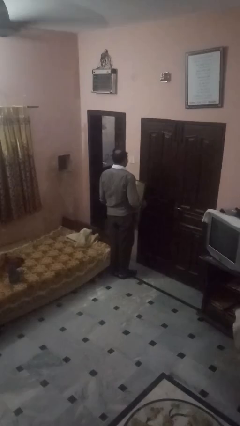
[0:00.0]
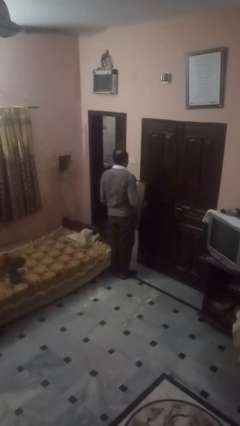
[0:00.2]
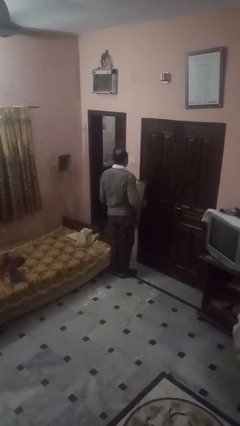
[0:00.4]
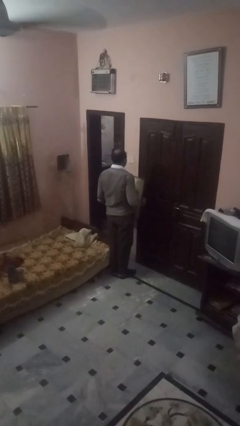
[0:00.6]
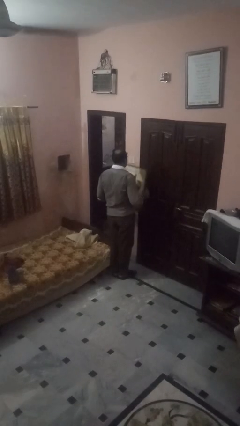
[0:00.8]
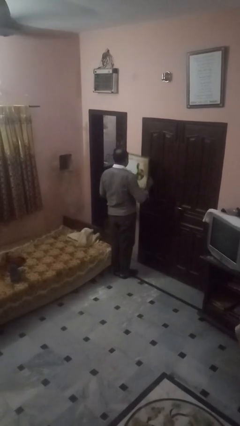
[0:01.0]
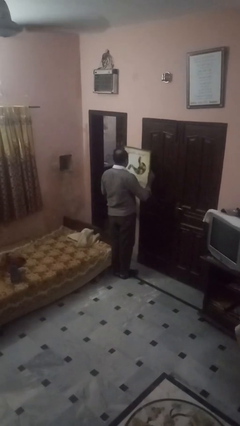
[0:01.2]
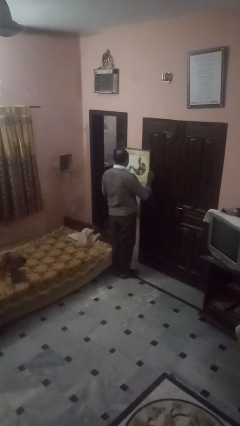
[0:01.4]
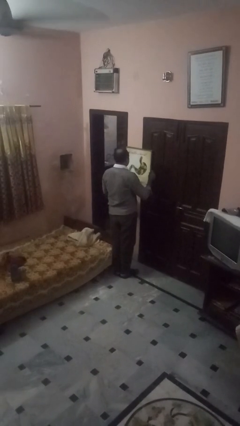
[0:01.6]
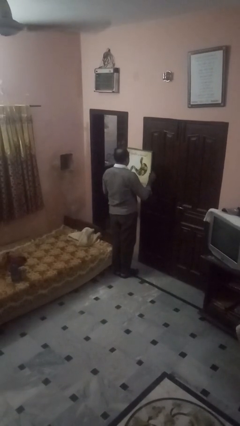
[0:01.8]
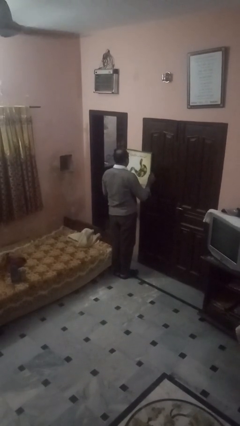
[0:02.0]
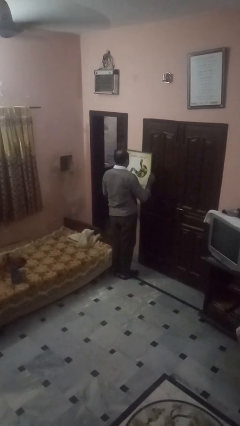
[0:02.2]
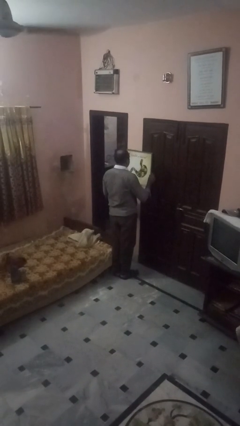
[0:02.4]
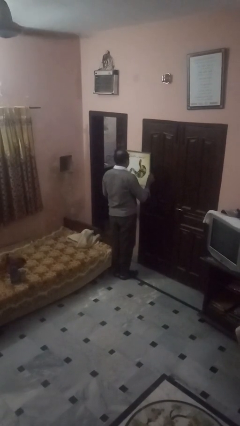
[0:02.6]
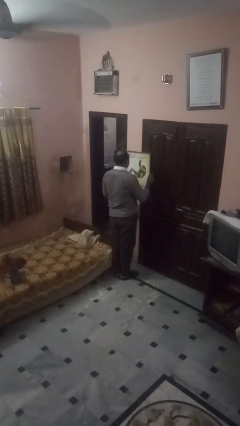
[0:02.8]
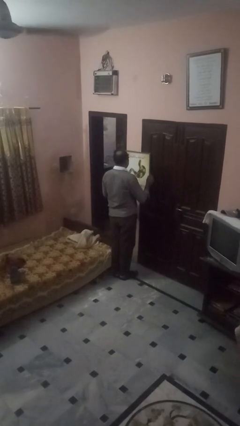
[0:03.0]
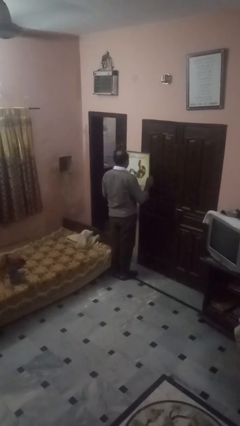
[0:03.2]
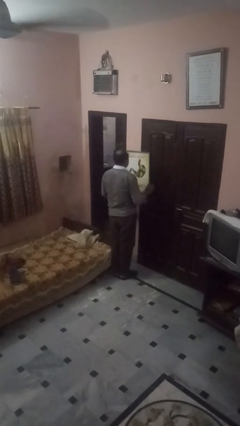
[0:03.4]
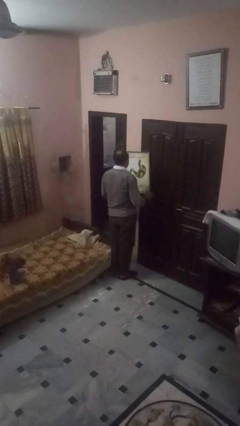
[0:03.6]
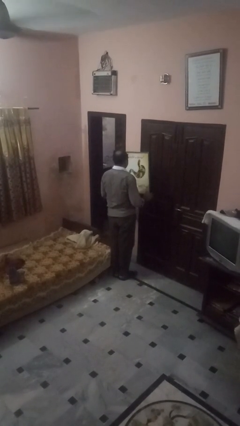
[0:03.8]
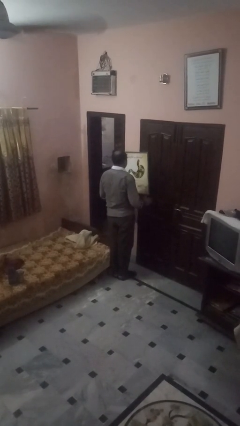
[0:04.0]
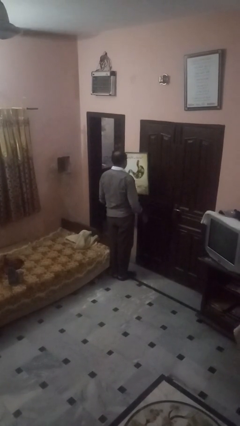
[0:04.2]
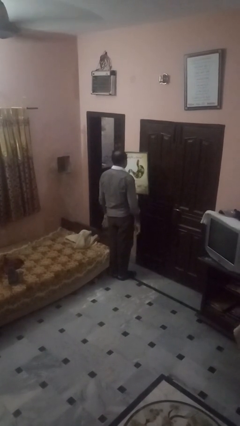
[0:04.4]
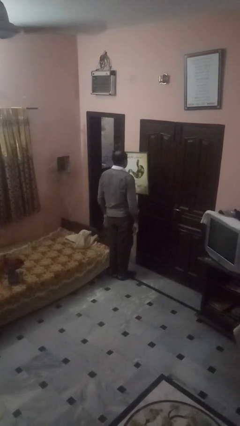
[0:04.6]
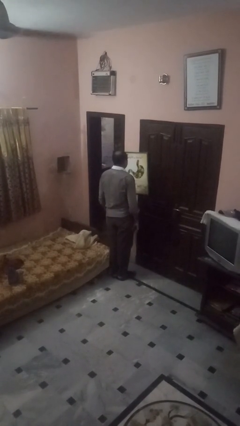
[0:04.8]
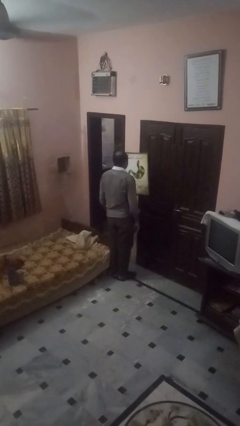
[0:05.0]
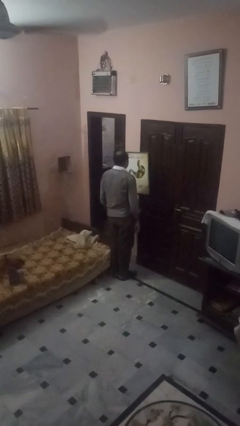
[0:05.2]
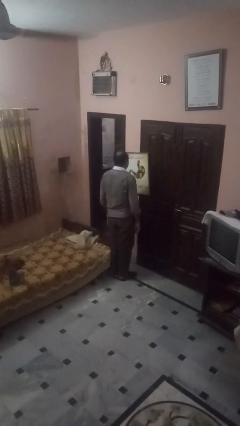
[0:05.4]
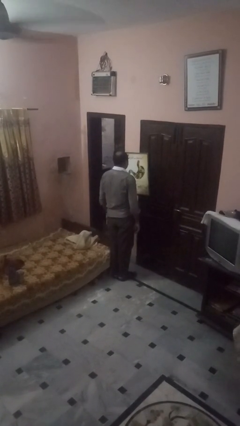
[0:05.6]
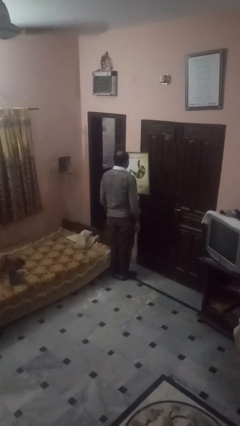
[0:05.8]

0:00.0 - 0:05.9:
person puts up picture frame

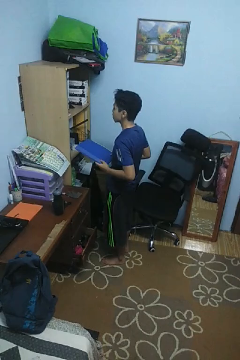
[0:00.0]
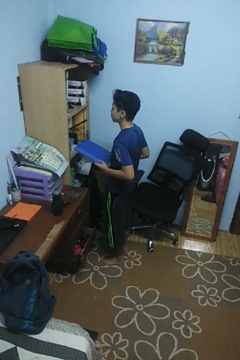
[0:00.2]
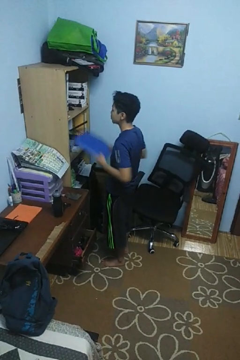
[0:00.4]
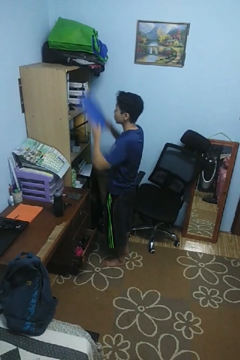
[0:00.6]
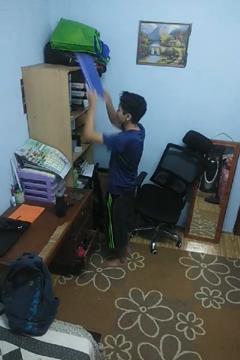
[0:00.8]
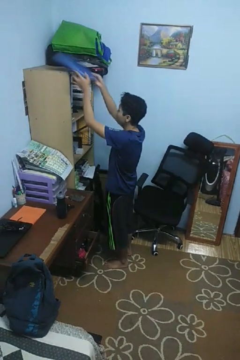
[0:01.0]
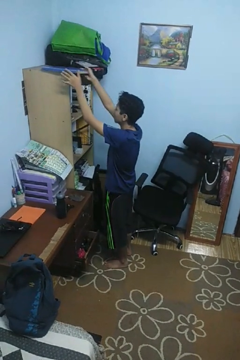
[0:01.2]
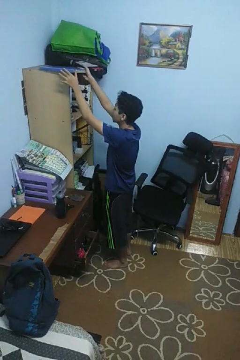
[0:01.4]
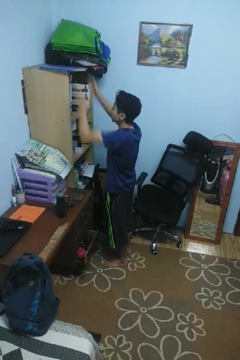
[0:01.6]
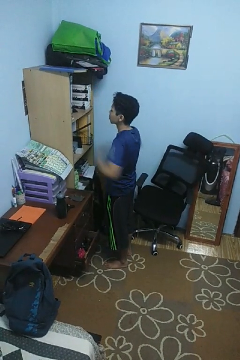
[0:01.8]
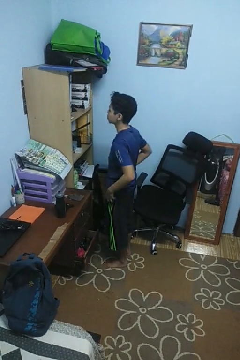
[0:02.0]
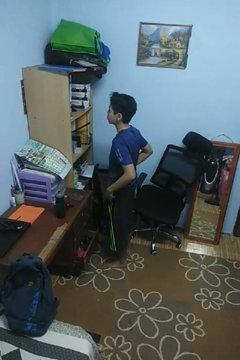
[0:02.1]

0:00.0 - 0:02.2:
person puts down object on shelf

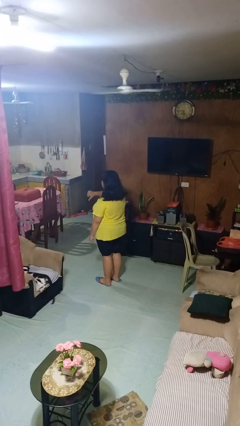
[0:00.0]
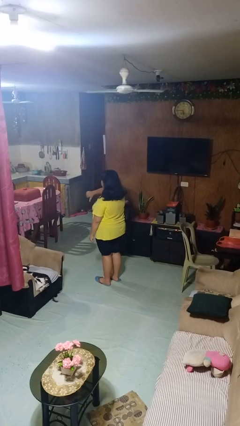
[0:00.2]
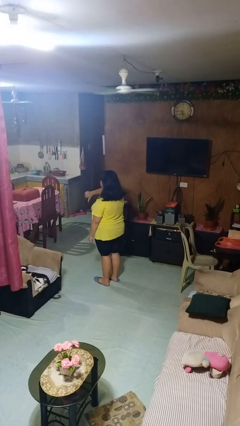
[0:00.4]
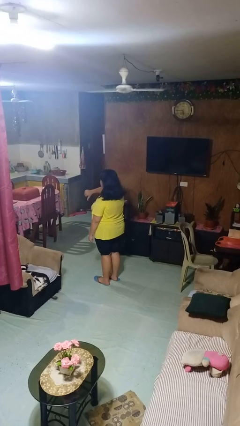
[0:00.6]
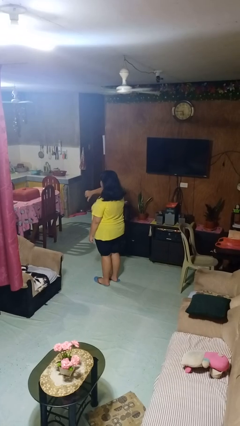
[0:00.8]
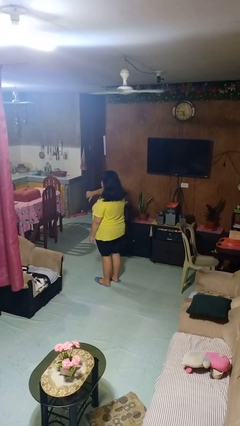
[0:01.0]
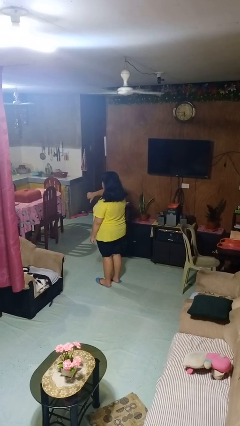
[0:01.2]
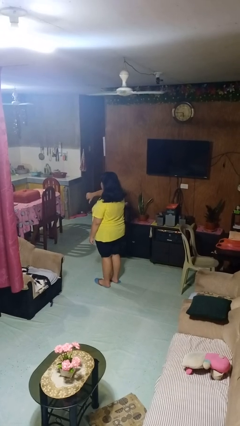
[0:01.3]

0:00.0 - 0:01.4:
person gestures thumbs down

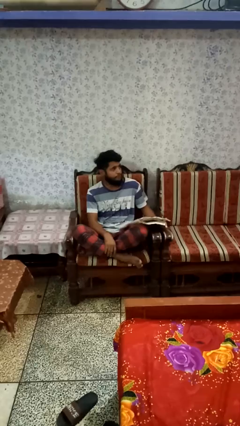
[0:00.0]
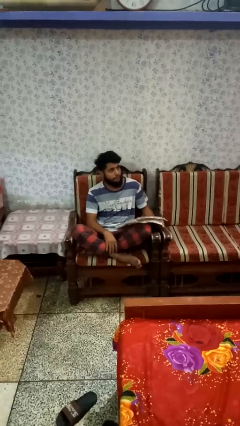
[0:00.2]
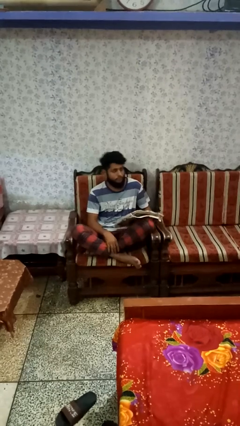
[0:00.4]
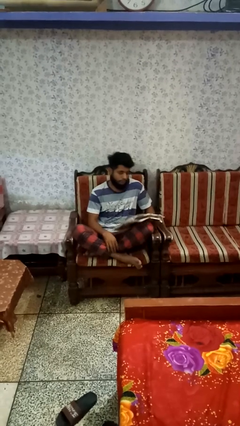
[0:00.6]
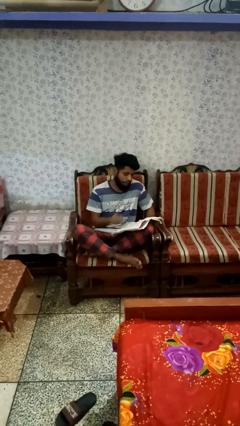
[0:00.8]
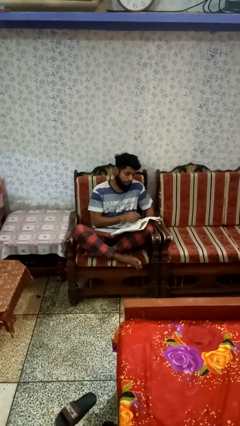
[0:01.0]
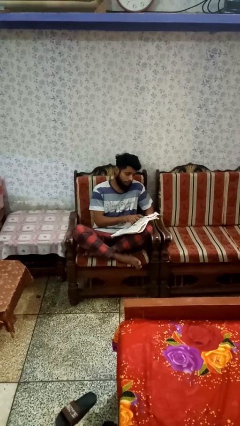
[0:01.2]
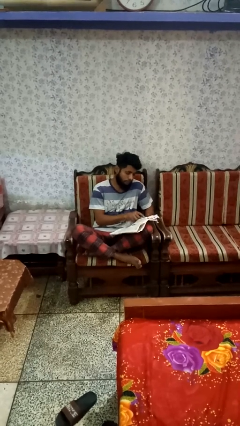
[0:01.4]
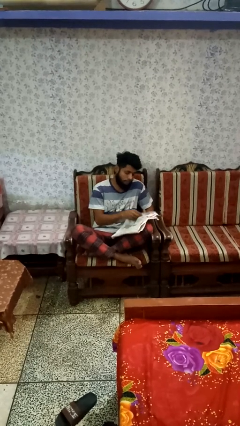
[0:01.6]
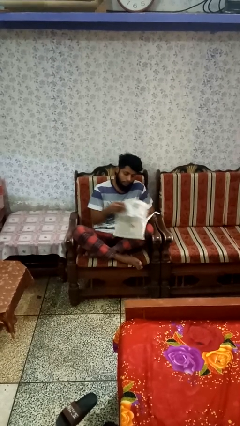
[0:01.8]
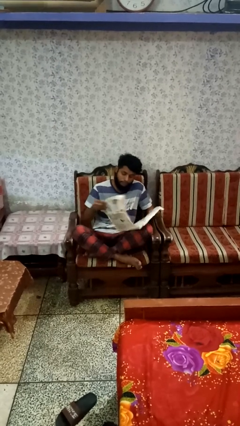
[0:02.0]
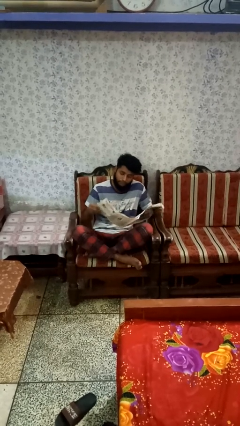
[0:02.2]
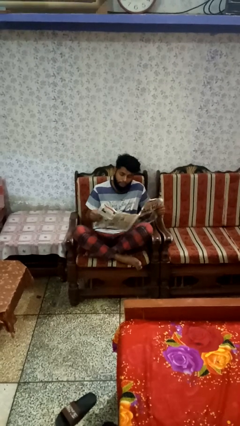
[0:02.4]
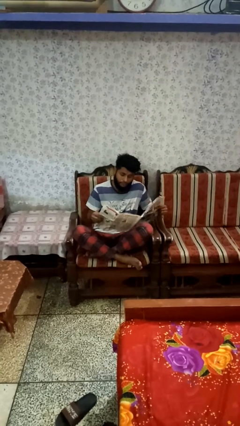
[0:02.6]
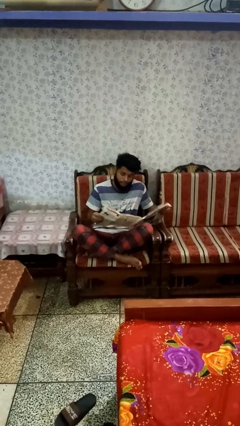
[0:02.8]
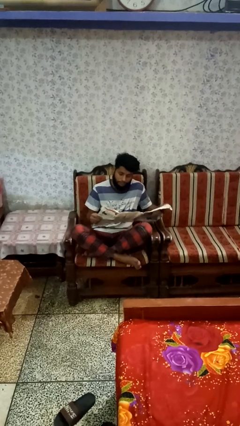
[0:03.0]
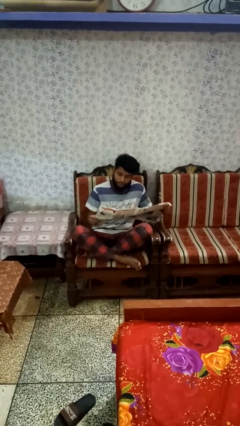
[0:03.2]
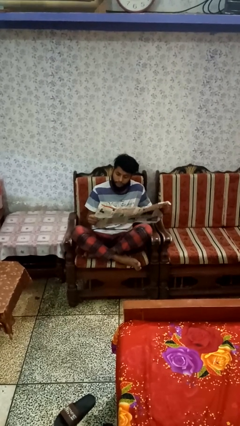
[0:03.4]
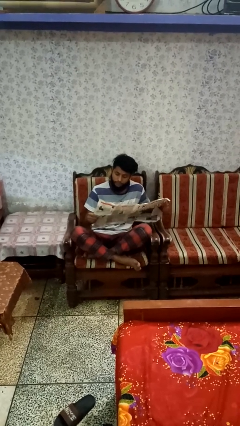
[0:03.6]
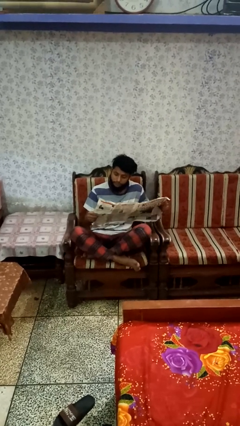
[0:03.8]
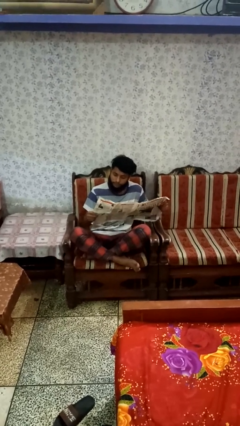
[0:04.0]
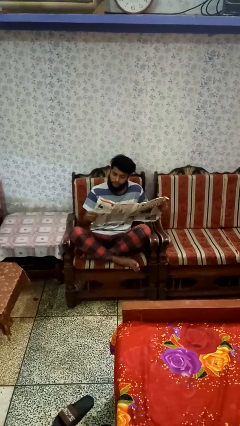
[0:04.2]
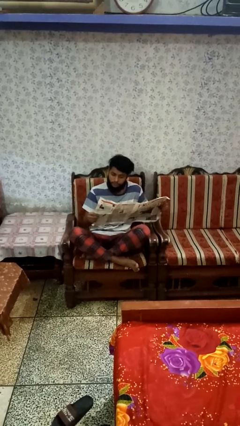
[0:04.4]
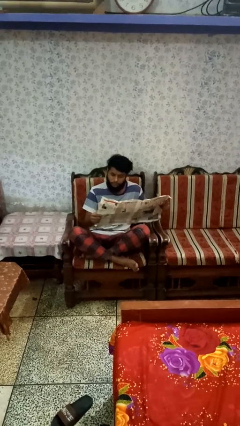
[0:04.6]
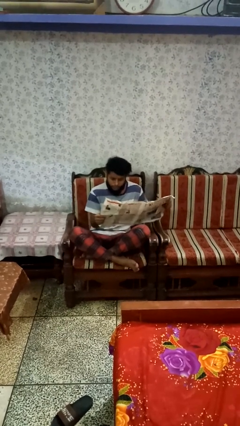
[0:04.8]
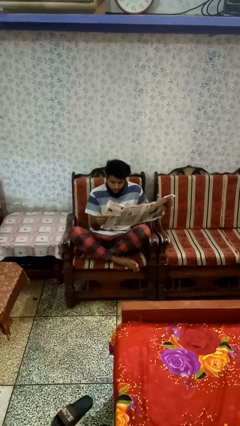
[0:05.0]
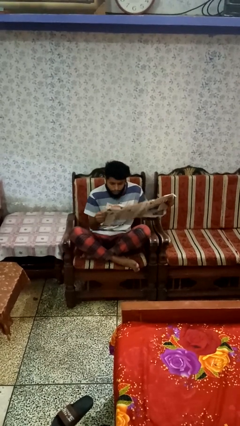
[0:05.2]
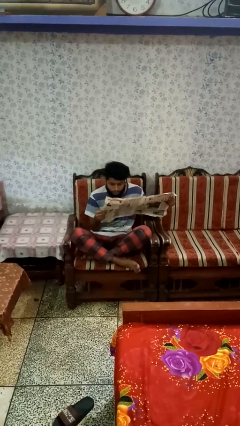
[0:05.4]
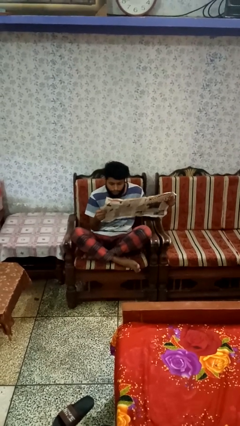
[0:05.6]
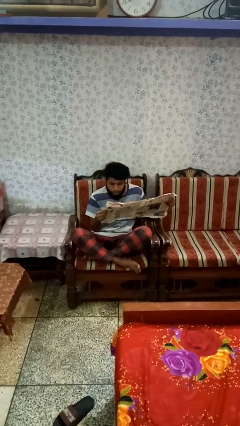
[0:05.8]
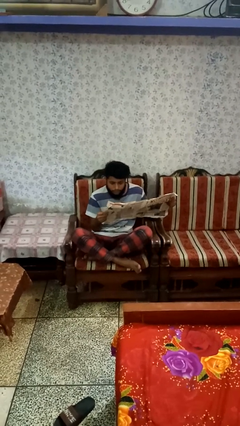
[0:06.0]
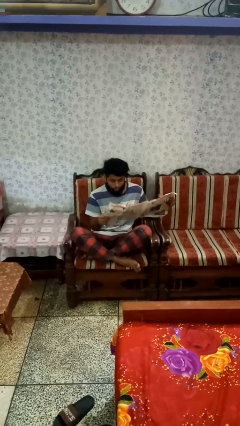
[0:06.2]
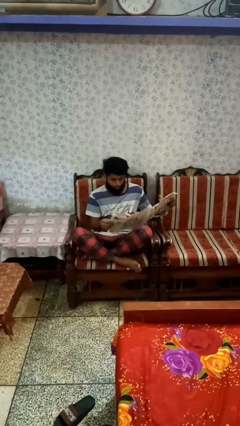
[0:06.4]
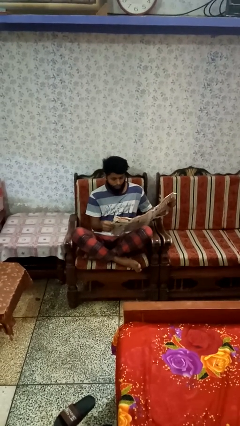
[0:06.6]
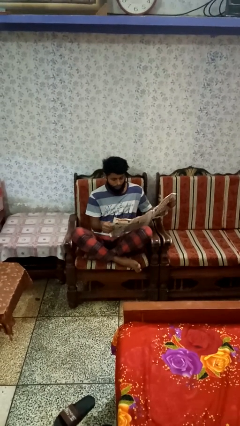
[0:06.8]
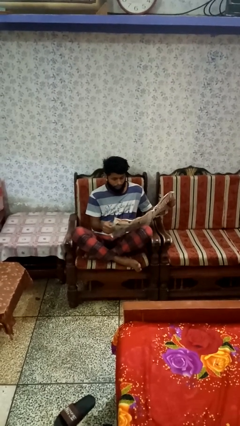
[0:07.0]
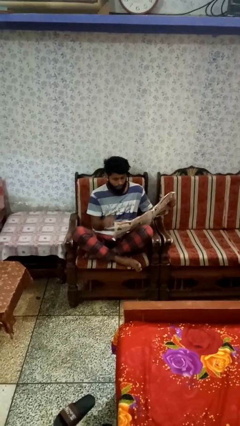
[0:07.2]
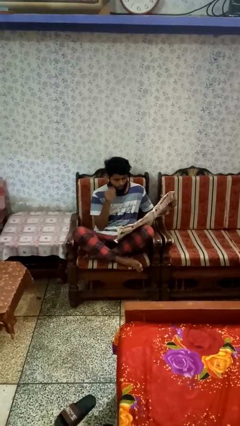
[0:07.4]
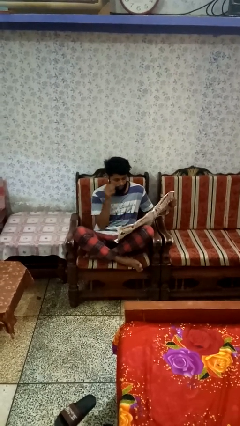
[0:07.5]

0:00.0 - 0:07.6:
person reads newspaper

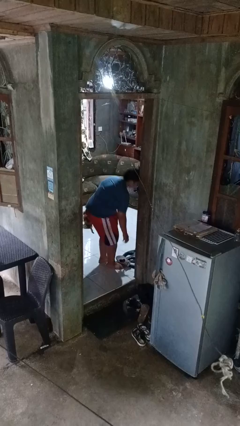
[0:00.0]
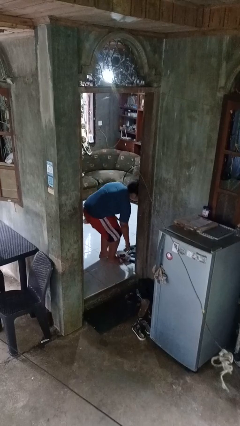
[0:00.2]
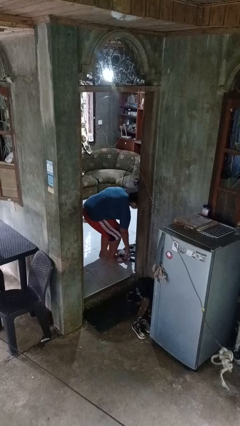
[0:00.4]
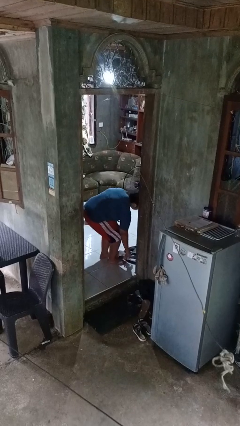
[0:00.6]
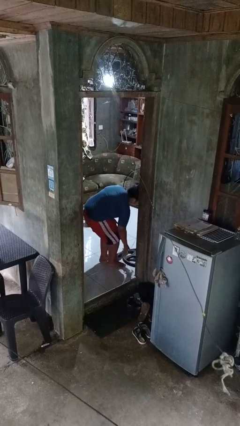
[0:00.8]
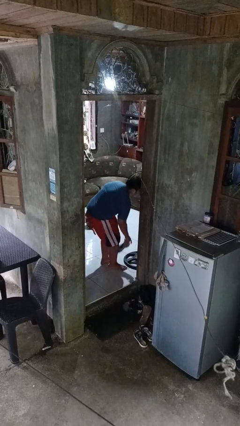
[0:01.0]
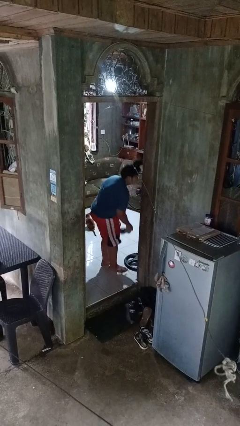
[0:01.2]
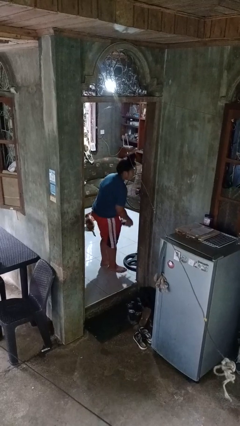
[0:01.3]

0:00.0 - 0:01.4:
person picks up object from floor
